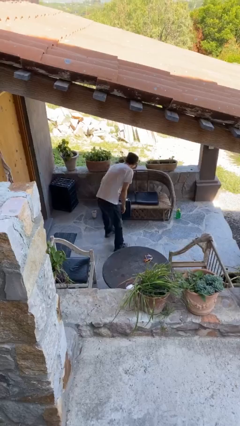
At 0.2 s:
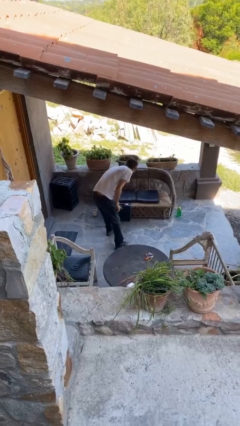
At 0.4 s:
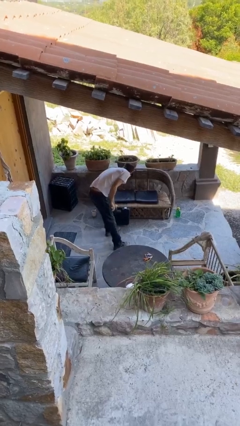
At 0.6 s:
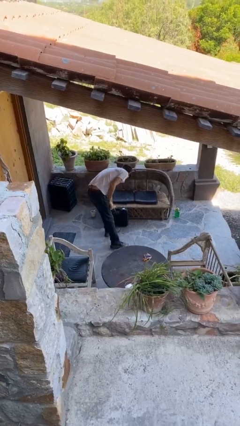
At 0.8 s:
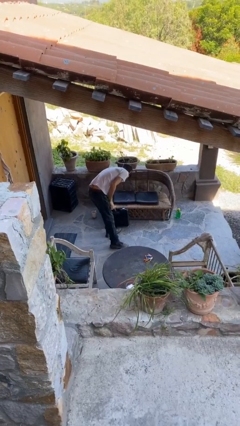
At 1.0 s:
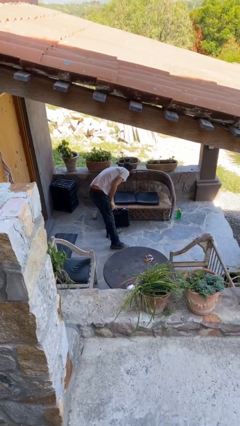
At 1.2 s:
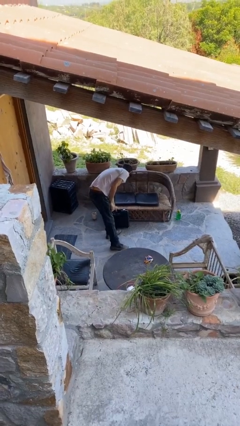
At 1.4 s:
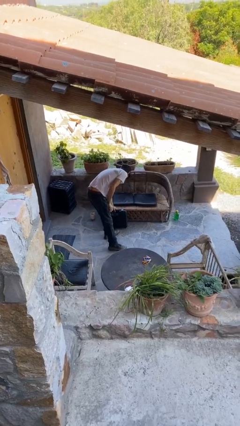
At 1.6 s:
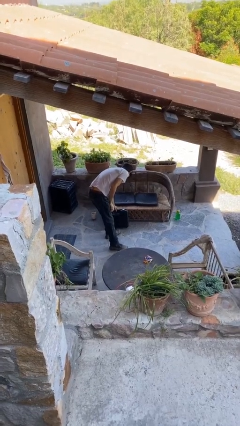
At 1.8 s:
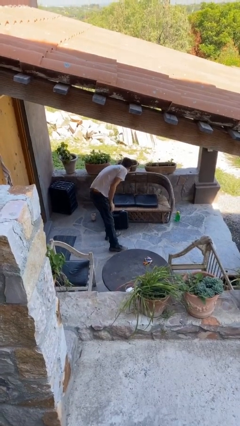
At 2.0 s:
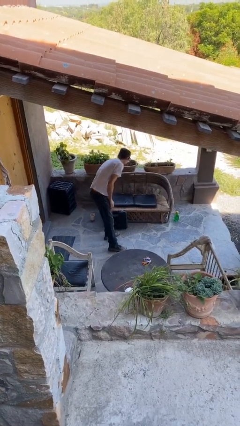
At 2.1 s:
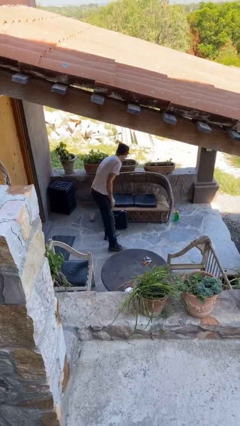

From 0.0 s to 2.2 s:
person puts down object on floor

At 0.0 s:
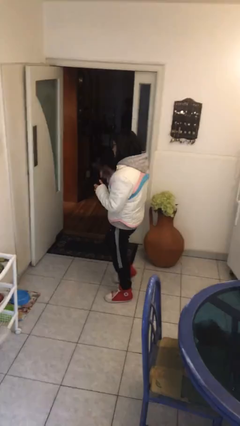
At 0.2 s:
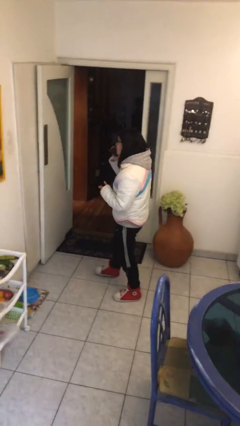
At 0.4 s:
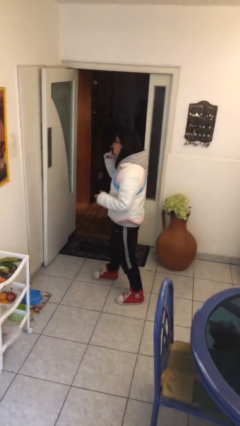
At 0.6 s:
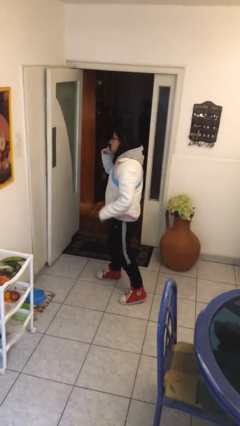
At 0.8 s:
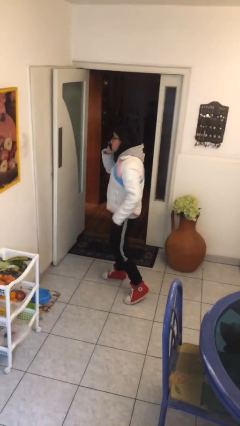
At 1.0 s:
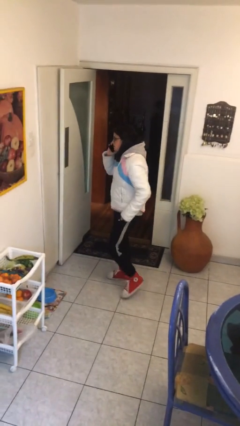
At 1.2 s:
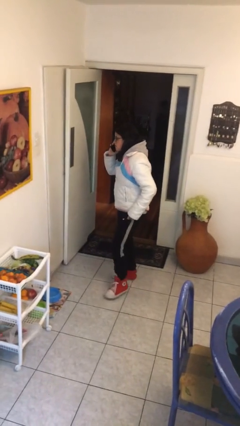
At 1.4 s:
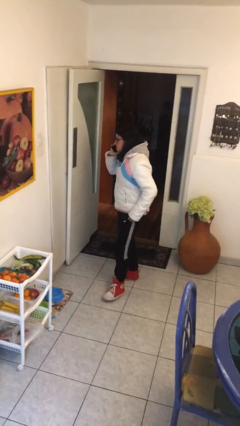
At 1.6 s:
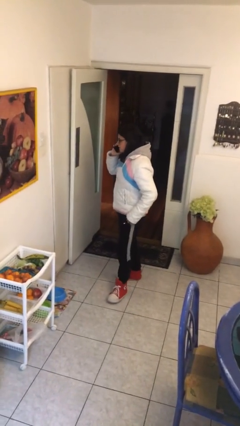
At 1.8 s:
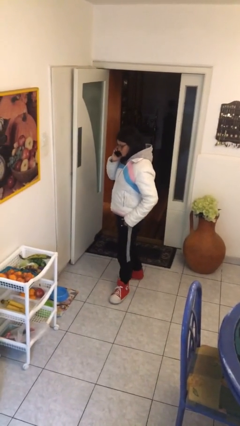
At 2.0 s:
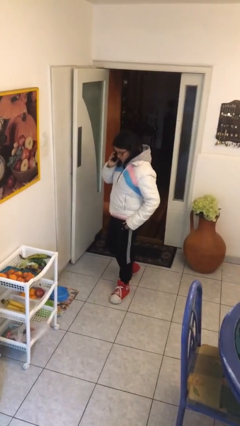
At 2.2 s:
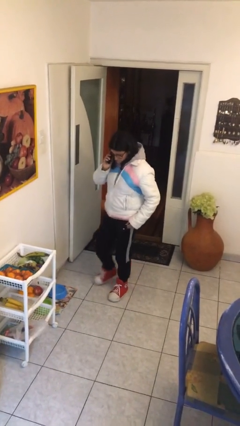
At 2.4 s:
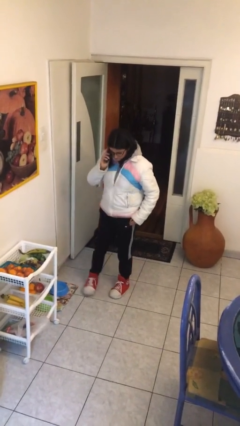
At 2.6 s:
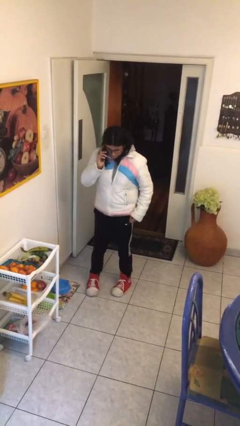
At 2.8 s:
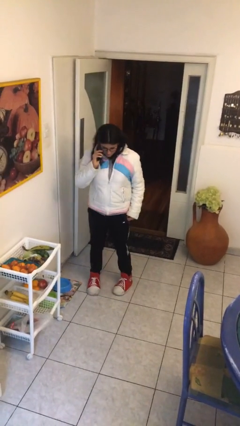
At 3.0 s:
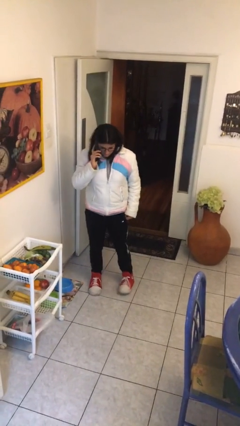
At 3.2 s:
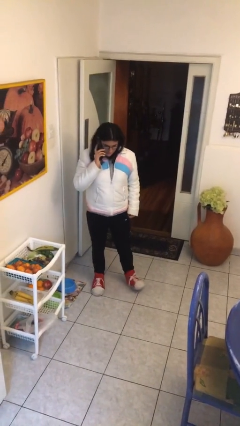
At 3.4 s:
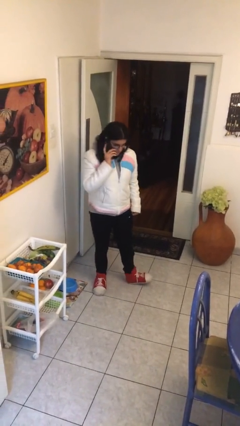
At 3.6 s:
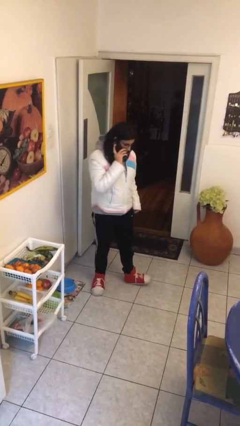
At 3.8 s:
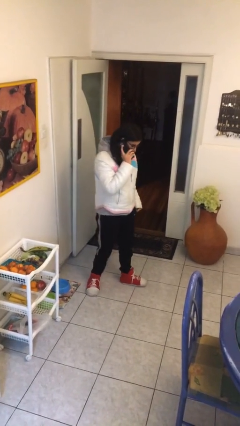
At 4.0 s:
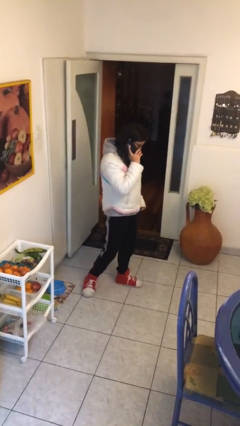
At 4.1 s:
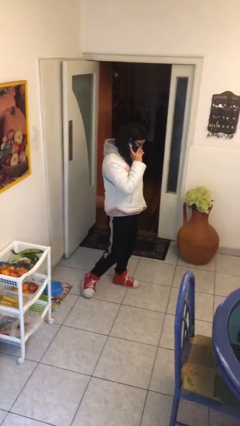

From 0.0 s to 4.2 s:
person talks on phone

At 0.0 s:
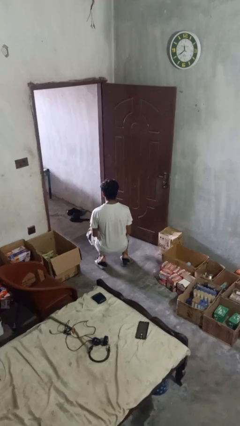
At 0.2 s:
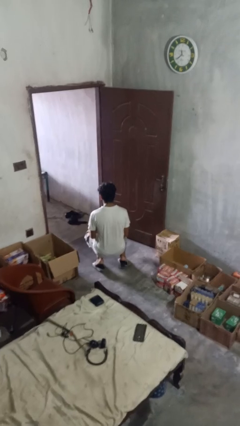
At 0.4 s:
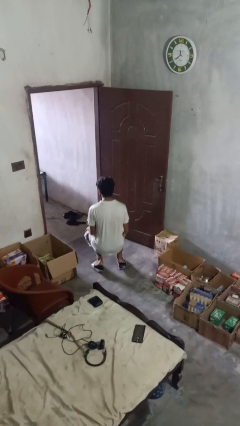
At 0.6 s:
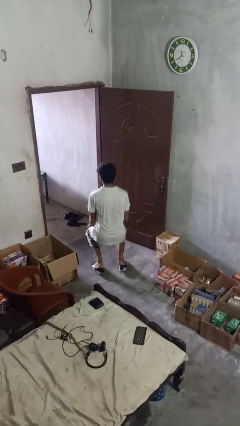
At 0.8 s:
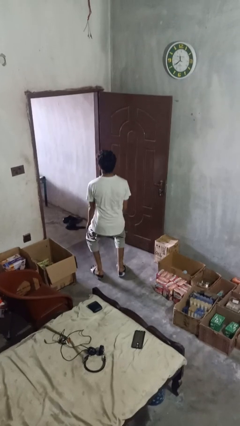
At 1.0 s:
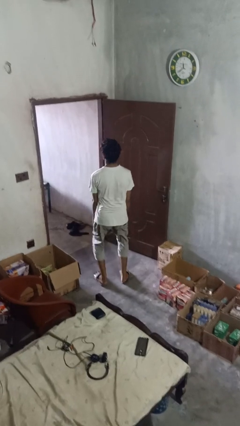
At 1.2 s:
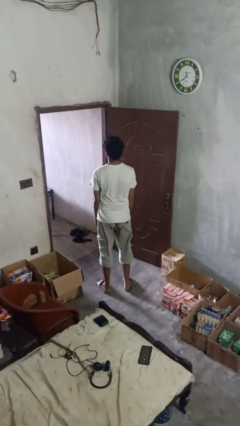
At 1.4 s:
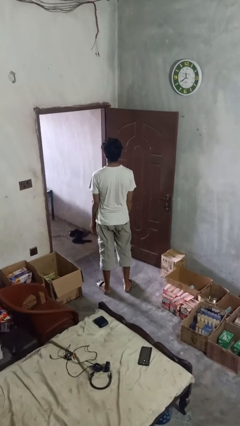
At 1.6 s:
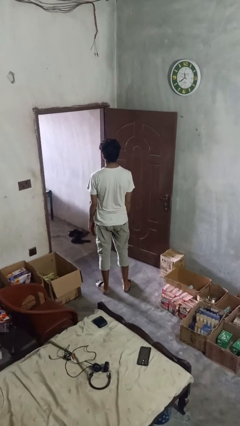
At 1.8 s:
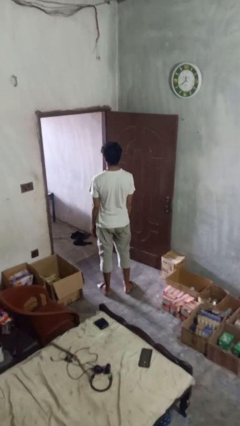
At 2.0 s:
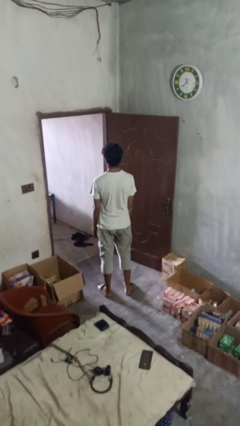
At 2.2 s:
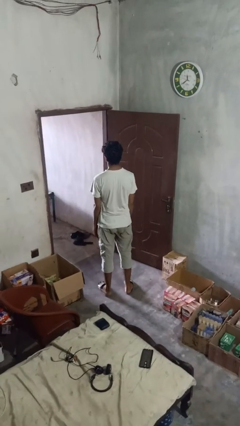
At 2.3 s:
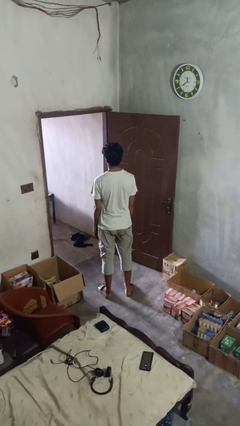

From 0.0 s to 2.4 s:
person stands up from floor

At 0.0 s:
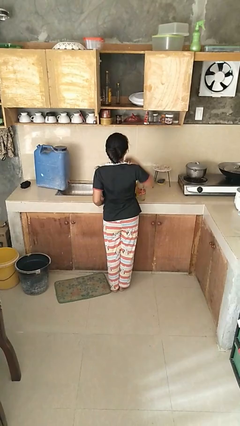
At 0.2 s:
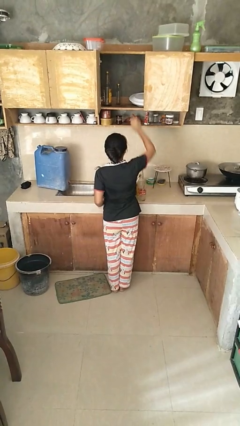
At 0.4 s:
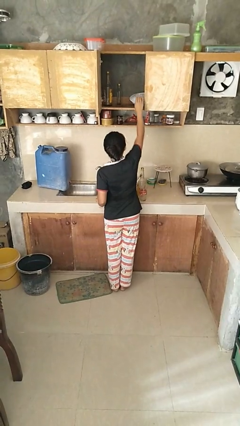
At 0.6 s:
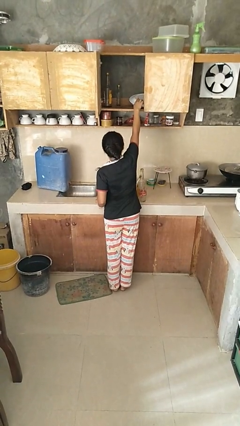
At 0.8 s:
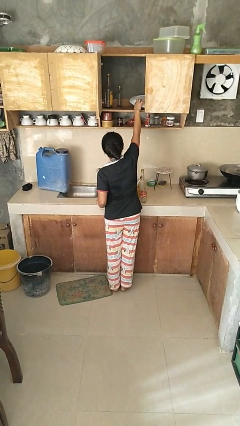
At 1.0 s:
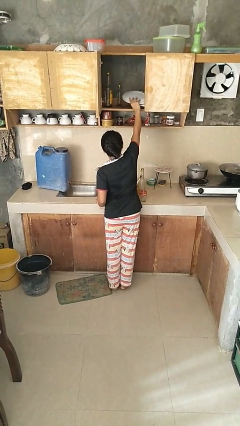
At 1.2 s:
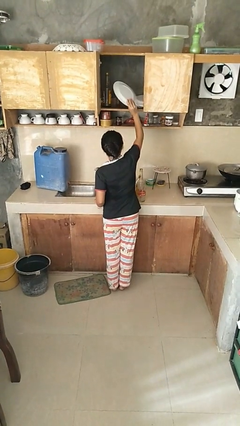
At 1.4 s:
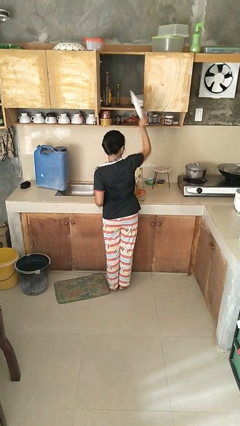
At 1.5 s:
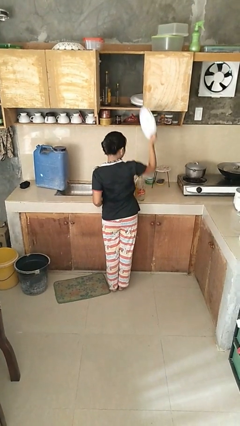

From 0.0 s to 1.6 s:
person takes object from cabinet

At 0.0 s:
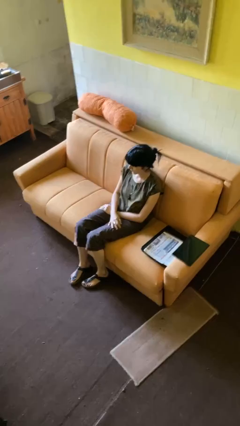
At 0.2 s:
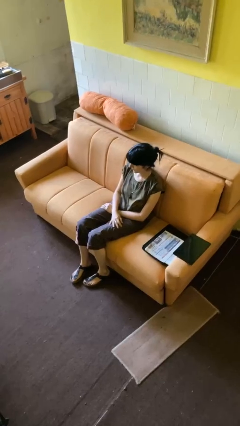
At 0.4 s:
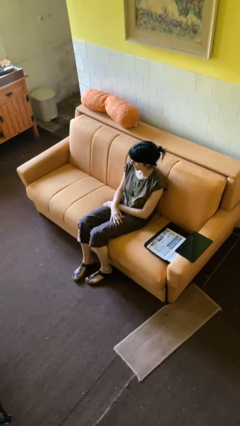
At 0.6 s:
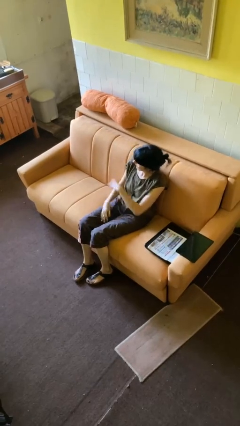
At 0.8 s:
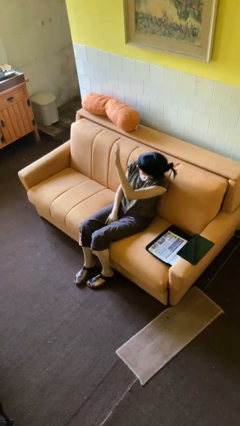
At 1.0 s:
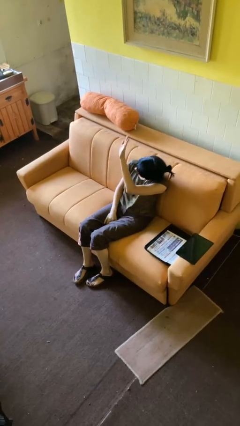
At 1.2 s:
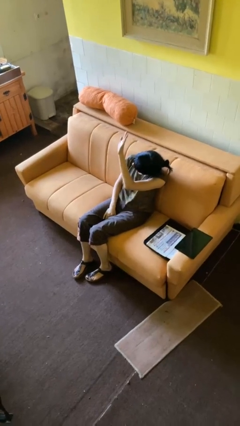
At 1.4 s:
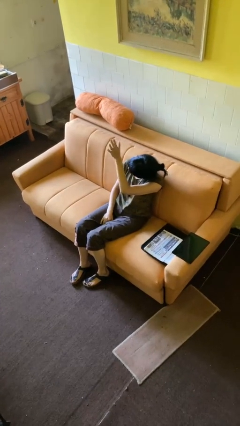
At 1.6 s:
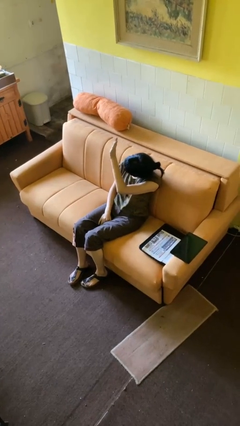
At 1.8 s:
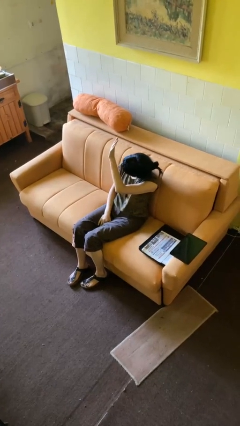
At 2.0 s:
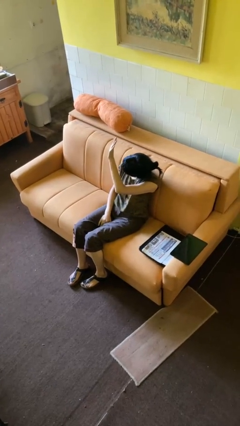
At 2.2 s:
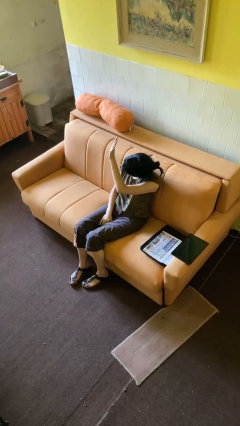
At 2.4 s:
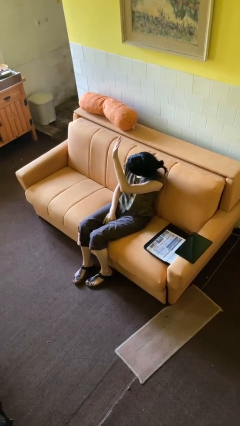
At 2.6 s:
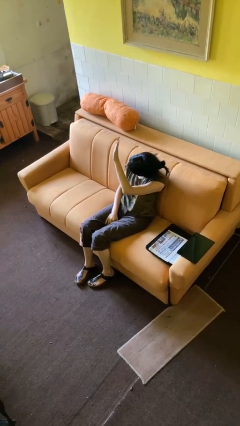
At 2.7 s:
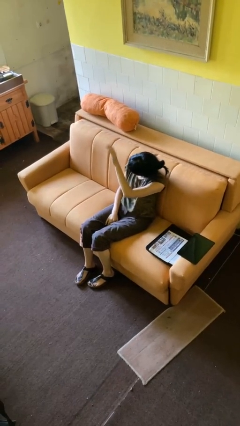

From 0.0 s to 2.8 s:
person waves at person

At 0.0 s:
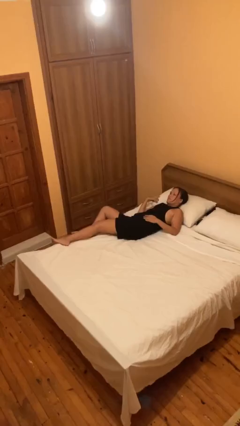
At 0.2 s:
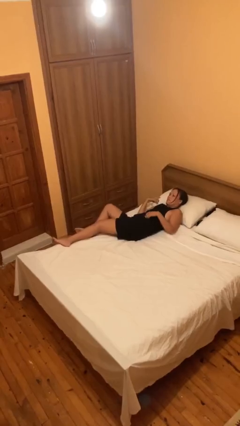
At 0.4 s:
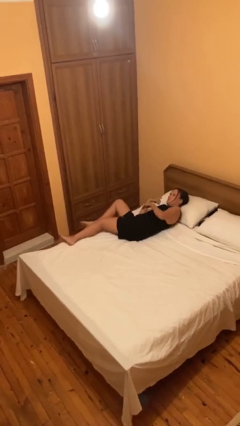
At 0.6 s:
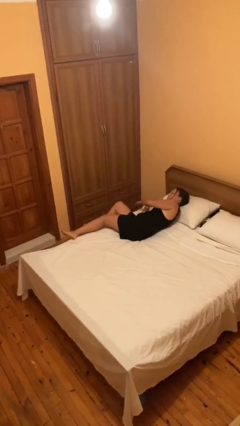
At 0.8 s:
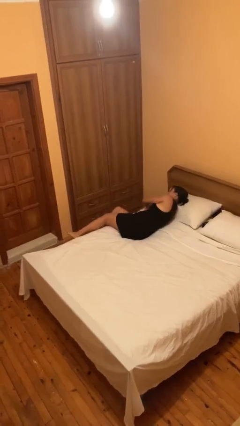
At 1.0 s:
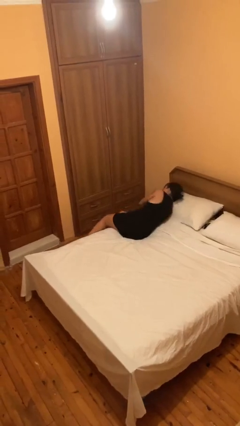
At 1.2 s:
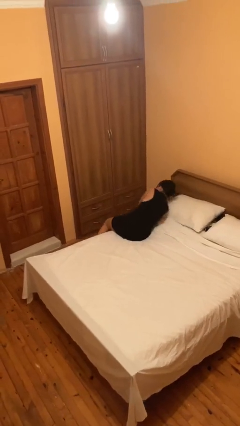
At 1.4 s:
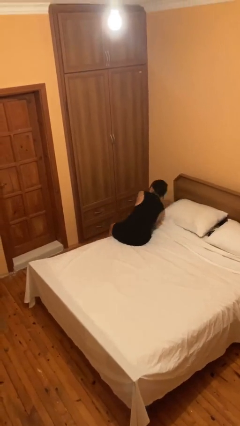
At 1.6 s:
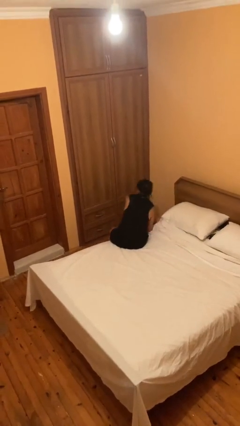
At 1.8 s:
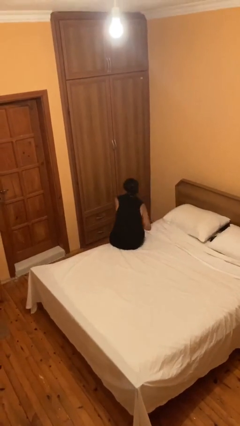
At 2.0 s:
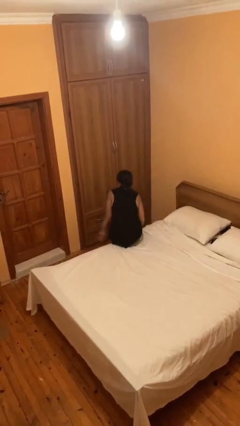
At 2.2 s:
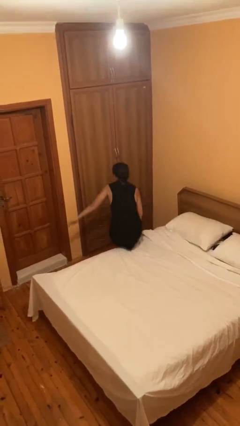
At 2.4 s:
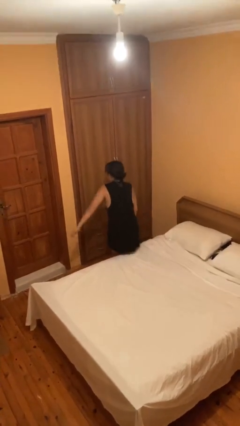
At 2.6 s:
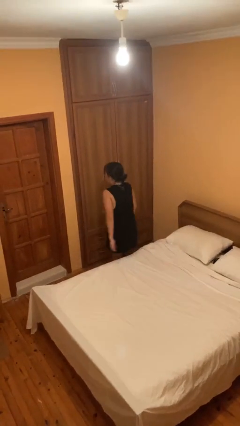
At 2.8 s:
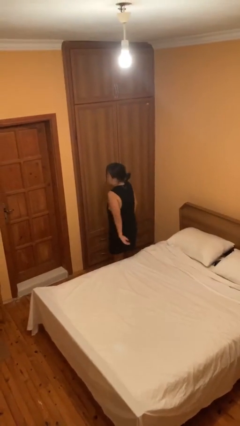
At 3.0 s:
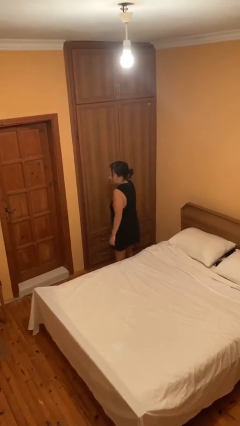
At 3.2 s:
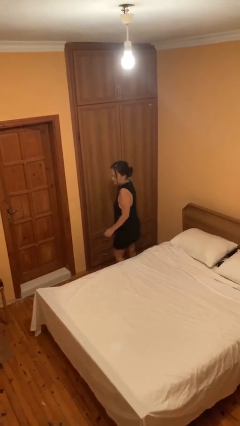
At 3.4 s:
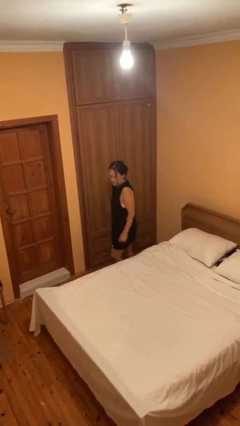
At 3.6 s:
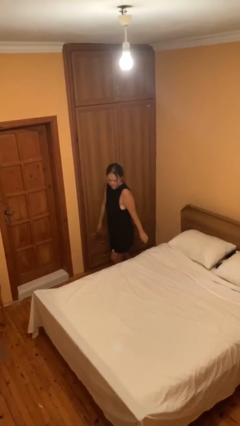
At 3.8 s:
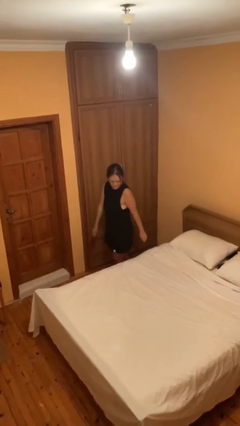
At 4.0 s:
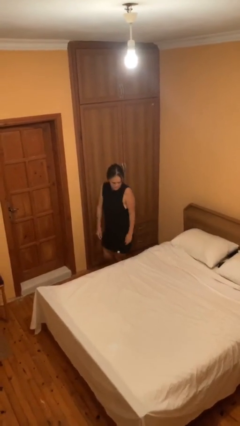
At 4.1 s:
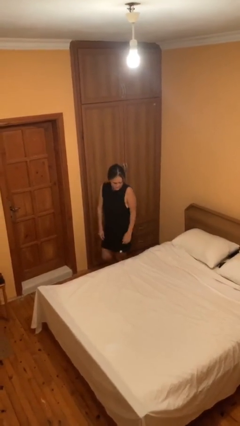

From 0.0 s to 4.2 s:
person stands up
